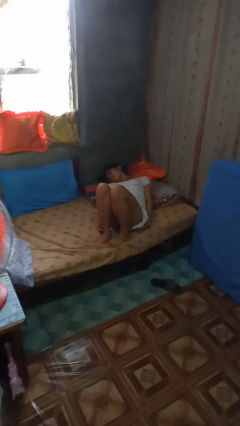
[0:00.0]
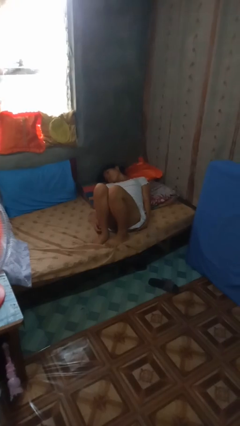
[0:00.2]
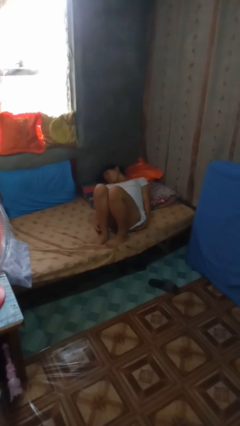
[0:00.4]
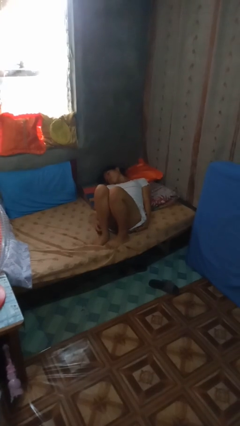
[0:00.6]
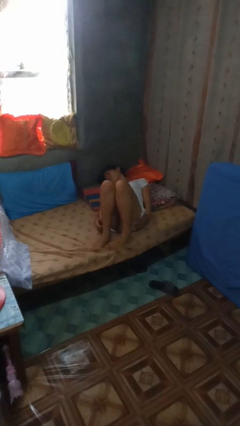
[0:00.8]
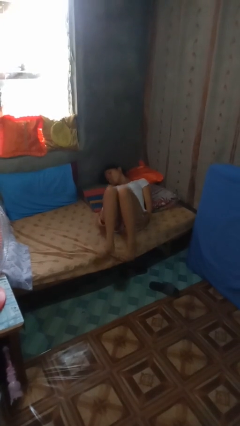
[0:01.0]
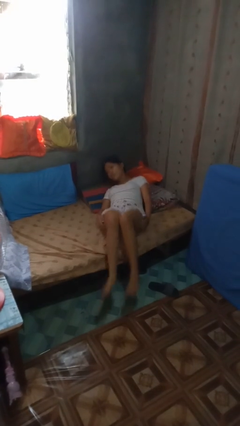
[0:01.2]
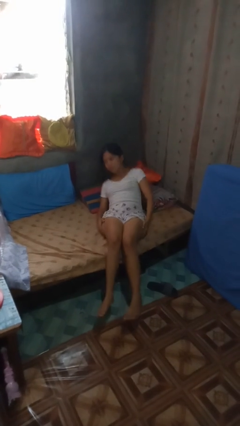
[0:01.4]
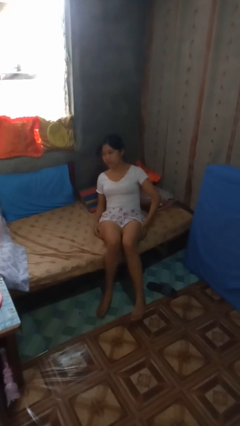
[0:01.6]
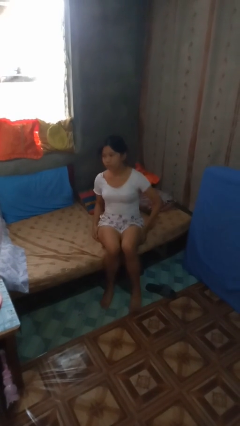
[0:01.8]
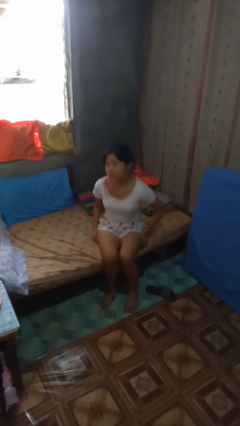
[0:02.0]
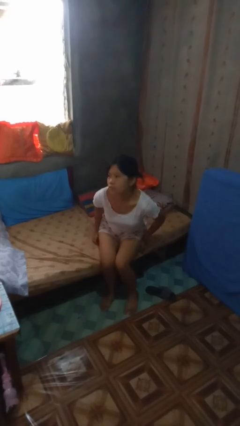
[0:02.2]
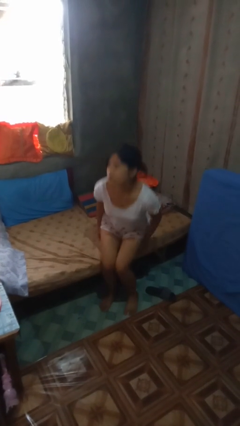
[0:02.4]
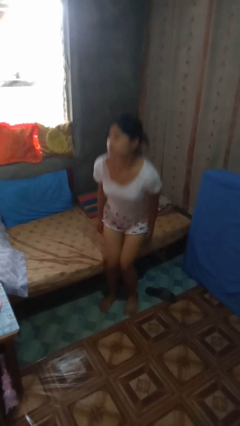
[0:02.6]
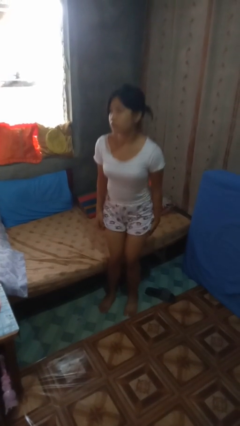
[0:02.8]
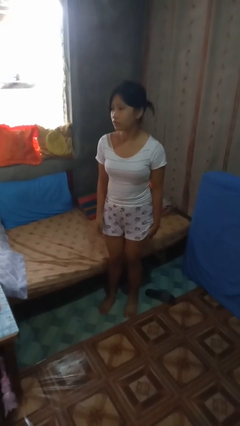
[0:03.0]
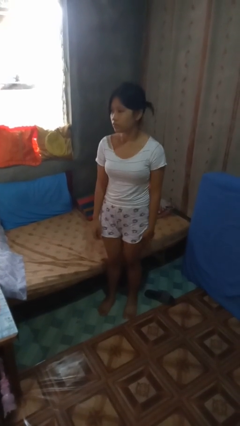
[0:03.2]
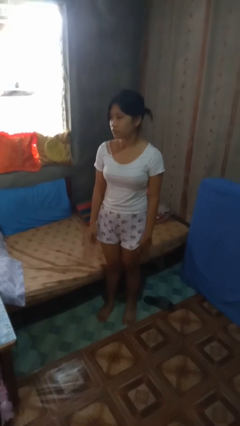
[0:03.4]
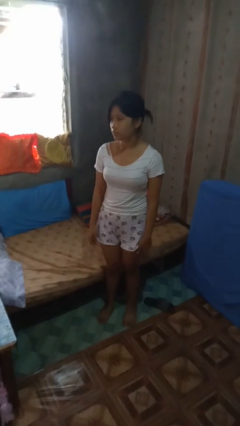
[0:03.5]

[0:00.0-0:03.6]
person stands up

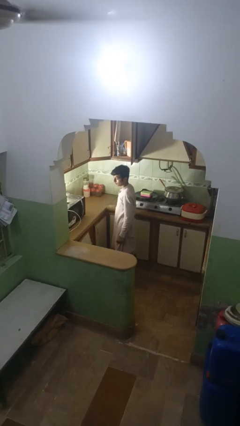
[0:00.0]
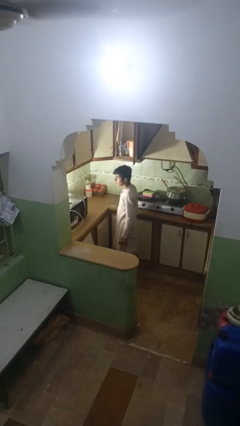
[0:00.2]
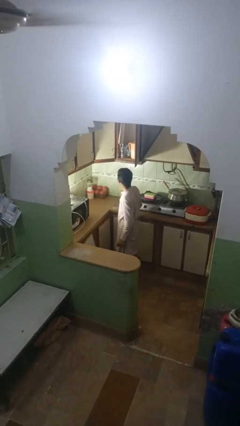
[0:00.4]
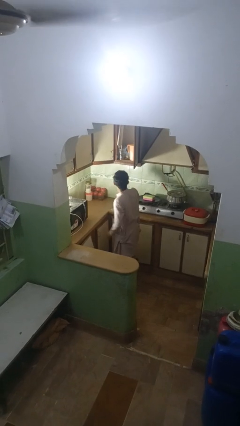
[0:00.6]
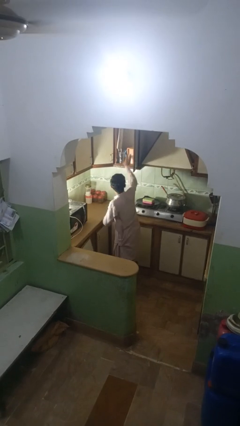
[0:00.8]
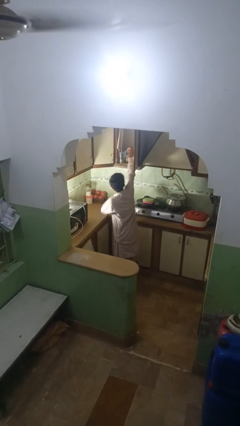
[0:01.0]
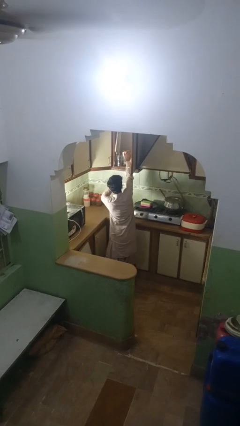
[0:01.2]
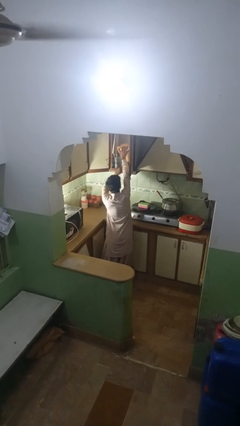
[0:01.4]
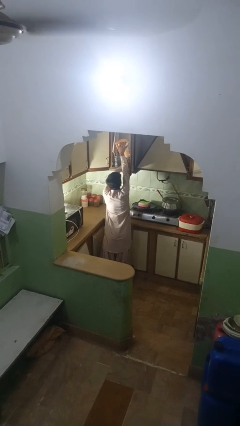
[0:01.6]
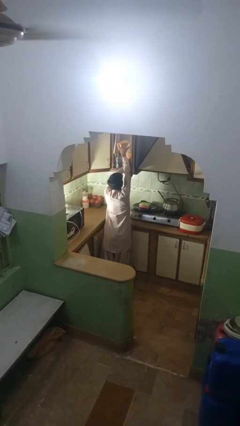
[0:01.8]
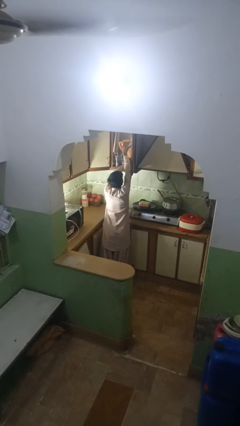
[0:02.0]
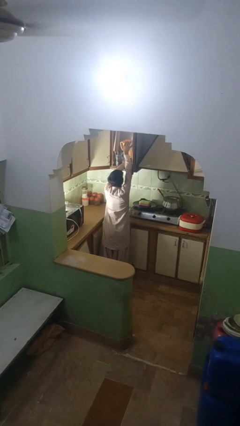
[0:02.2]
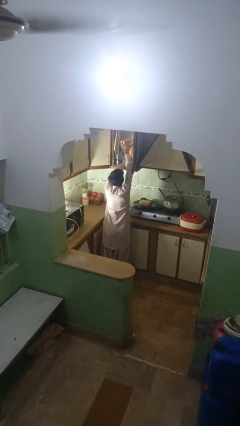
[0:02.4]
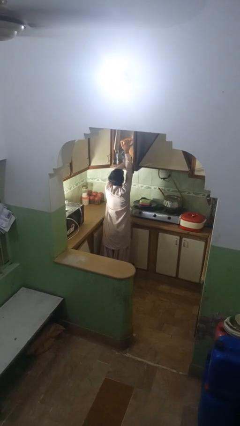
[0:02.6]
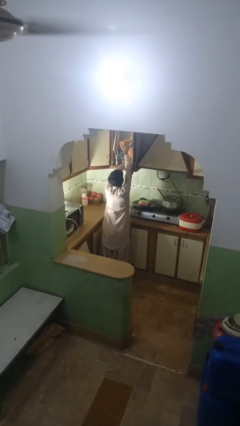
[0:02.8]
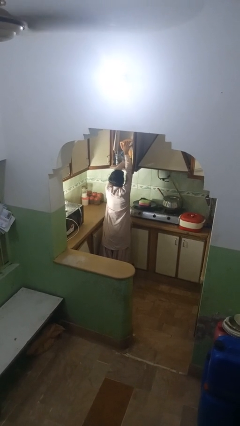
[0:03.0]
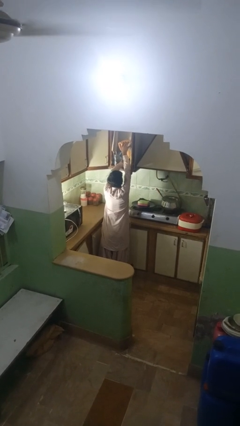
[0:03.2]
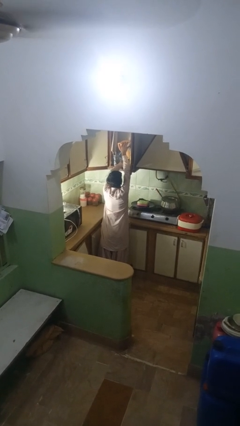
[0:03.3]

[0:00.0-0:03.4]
person searches in kitchen drawer

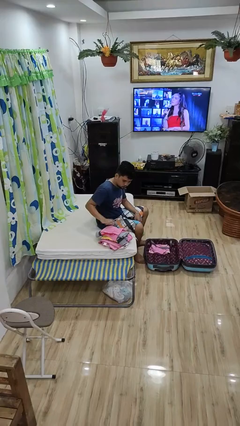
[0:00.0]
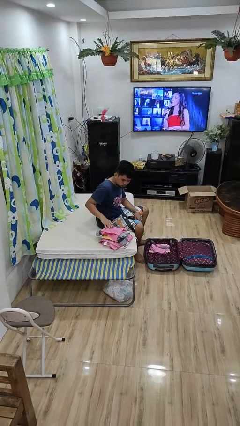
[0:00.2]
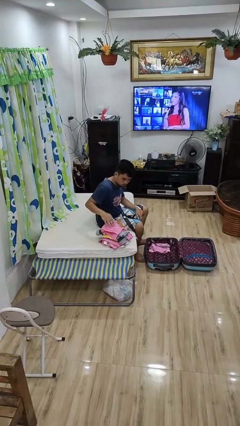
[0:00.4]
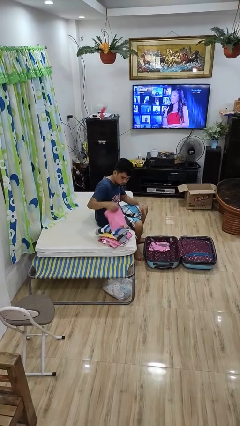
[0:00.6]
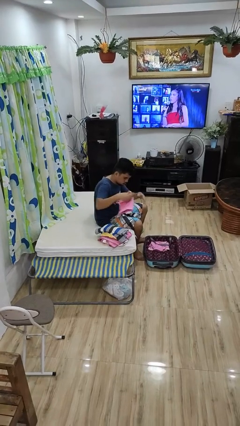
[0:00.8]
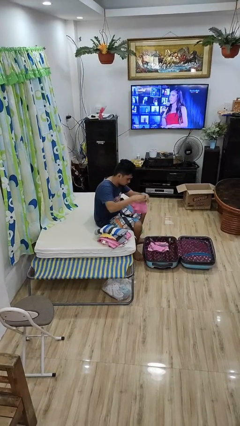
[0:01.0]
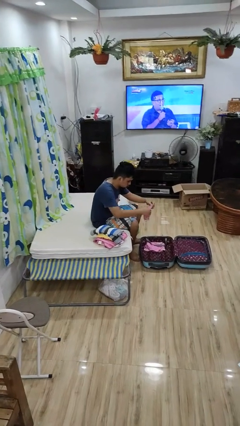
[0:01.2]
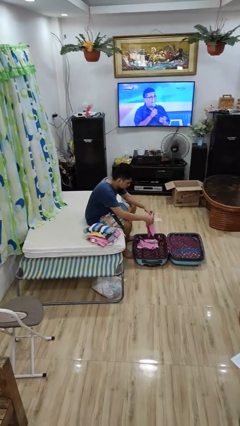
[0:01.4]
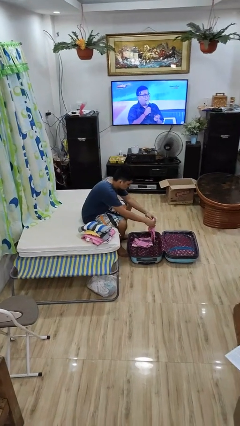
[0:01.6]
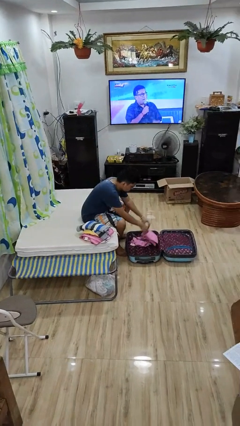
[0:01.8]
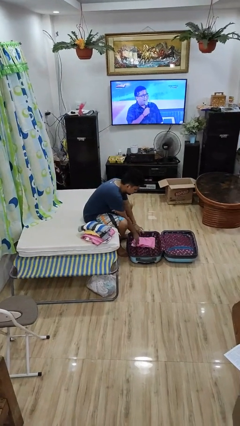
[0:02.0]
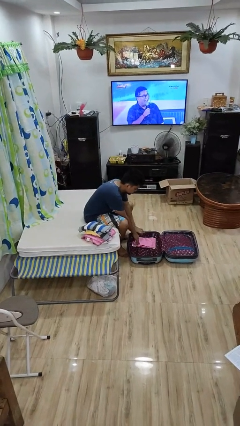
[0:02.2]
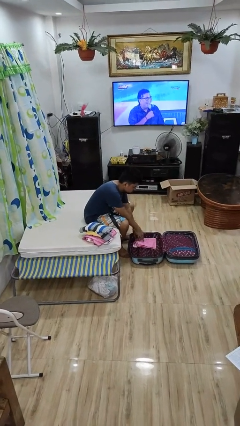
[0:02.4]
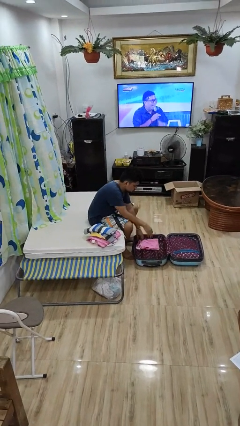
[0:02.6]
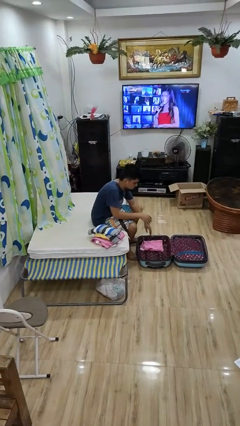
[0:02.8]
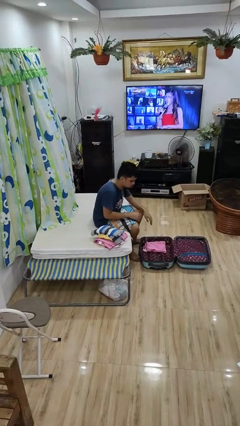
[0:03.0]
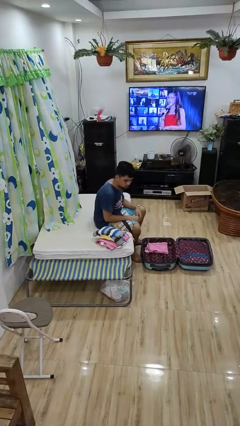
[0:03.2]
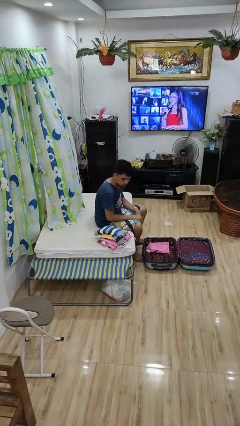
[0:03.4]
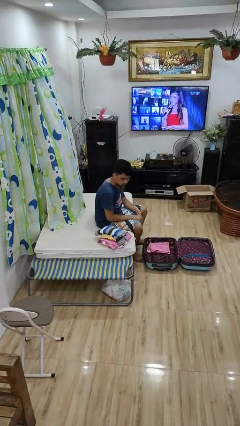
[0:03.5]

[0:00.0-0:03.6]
person loads clothes into suitcase

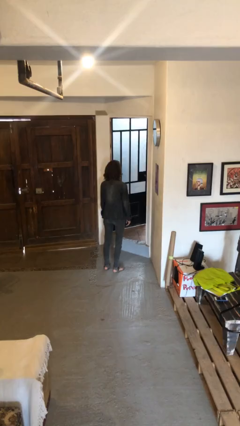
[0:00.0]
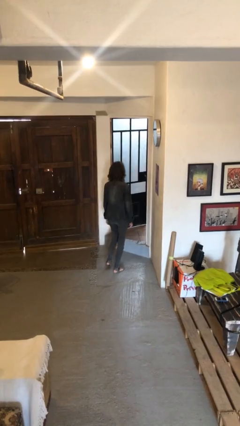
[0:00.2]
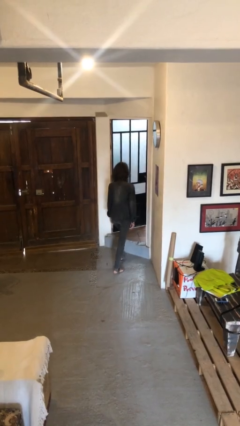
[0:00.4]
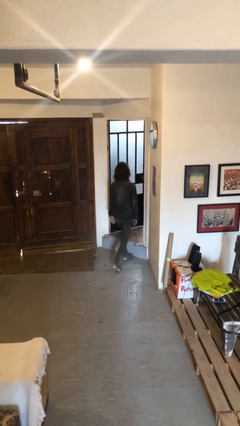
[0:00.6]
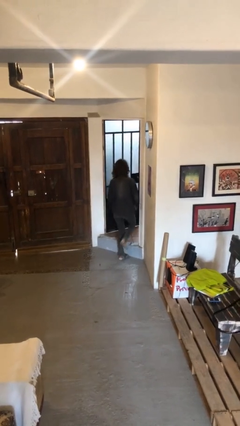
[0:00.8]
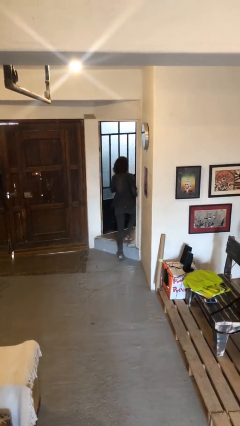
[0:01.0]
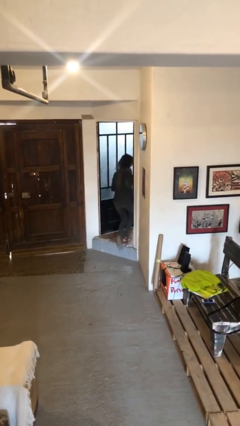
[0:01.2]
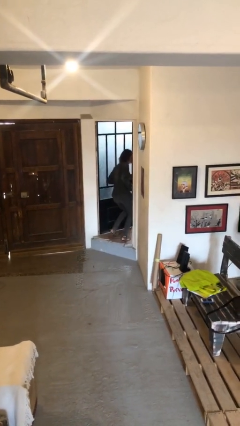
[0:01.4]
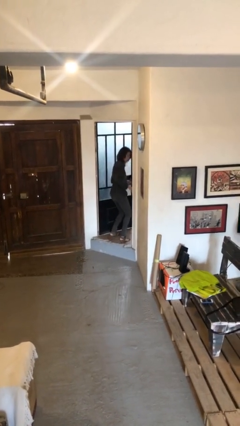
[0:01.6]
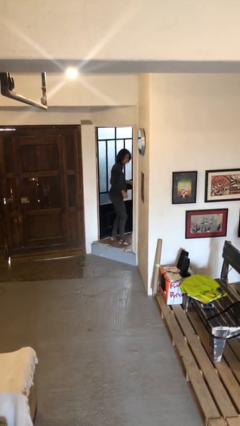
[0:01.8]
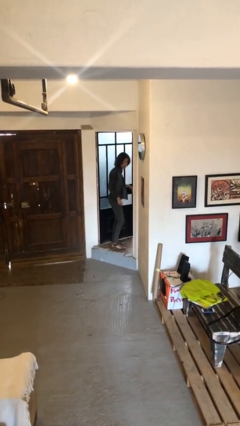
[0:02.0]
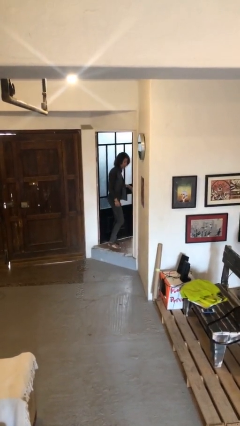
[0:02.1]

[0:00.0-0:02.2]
person bumps into wall

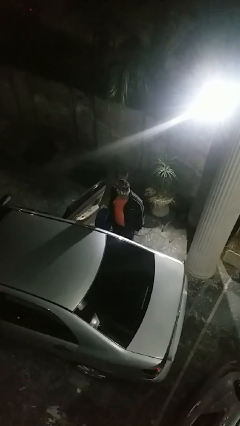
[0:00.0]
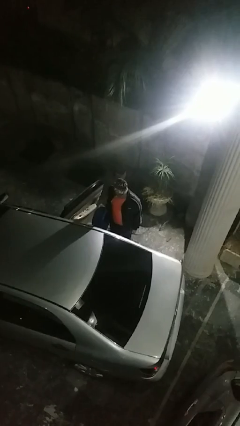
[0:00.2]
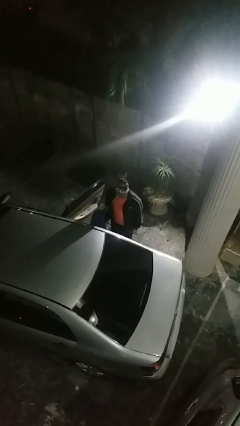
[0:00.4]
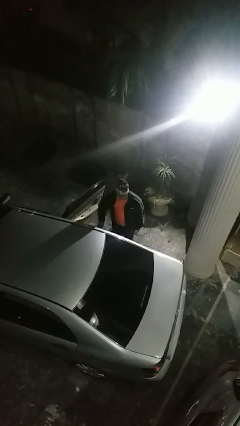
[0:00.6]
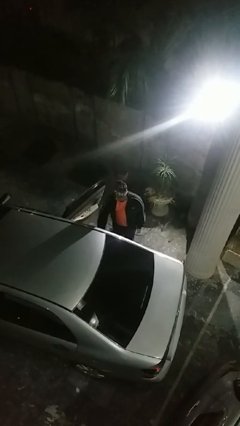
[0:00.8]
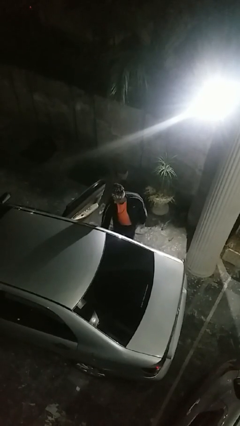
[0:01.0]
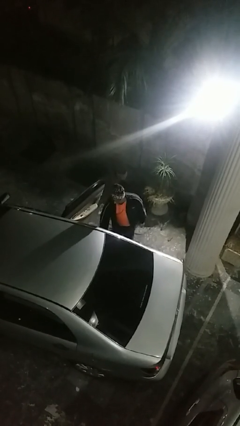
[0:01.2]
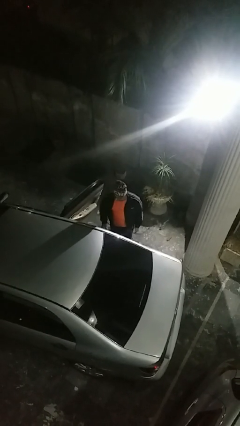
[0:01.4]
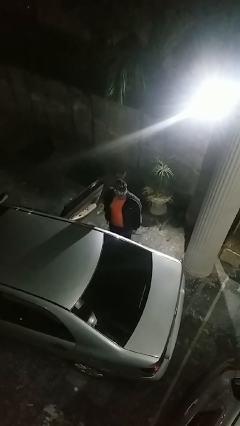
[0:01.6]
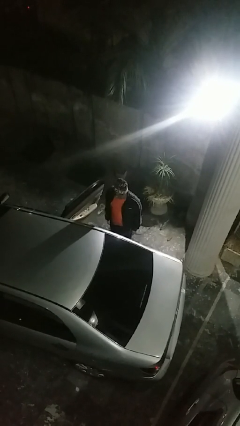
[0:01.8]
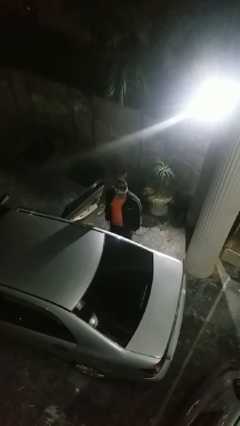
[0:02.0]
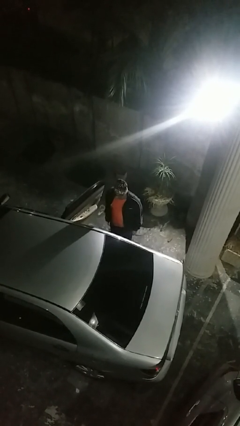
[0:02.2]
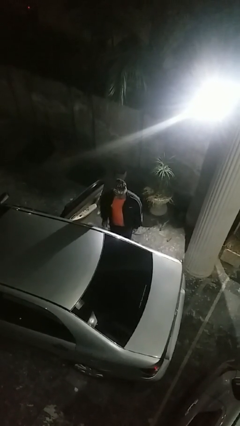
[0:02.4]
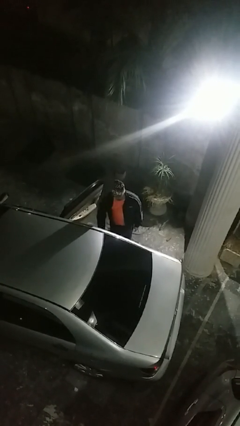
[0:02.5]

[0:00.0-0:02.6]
person loads car

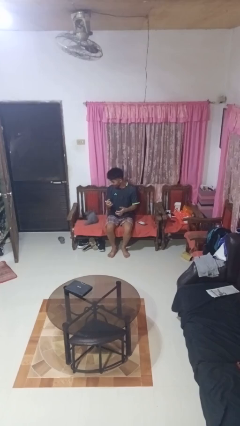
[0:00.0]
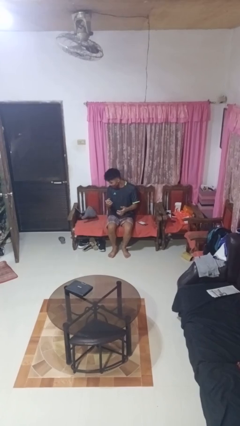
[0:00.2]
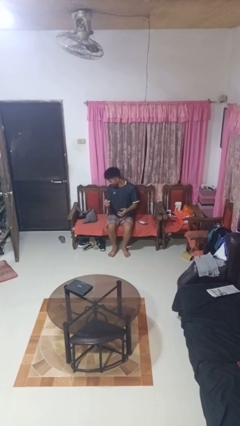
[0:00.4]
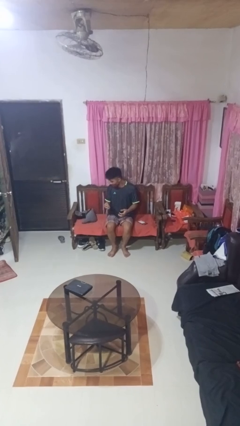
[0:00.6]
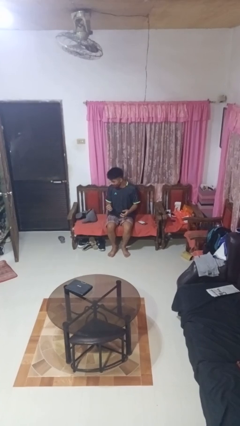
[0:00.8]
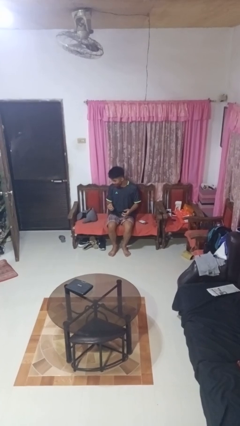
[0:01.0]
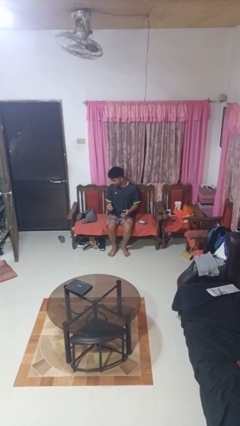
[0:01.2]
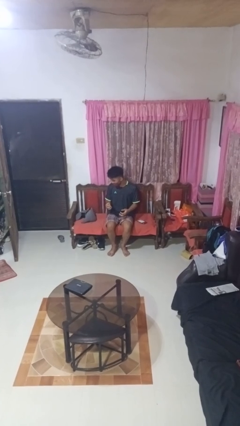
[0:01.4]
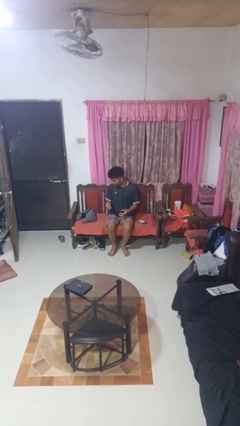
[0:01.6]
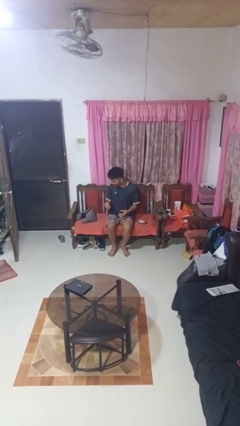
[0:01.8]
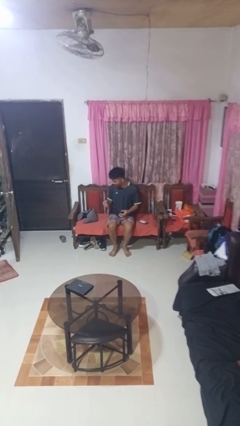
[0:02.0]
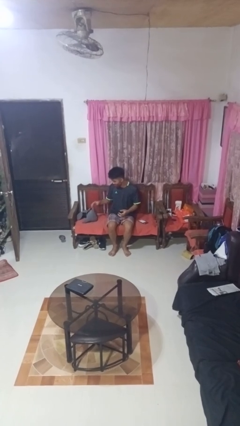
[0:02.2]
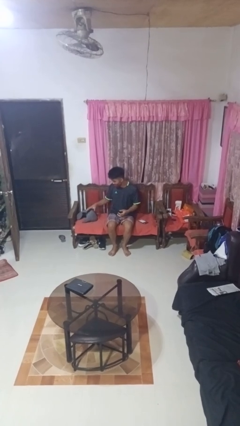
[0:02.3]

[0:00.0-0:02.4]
person drops object
